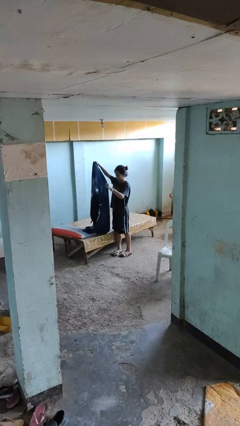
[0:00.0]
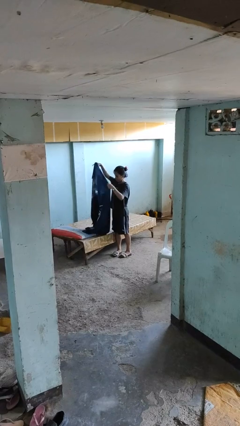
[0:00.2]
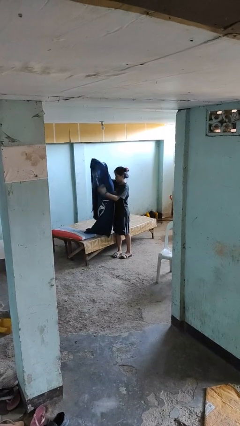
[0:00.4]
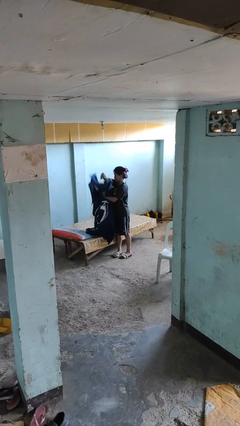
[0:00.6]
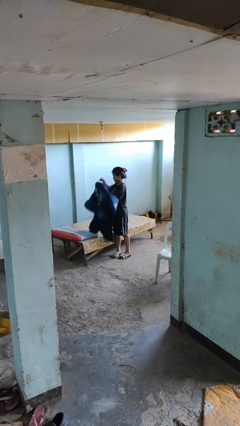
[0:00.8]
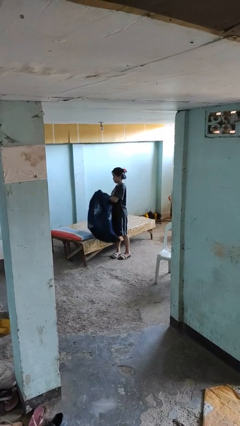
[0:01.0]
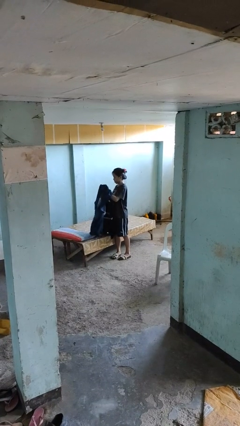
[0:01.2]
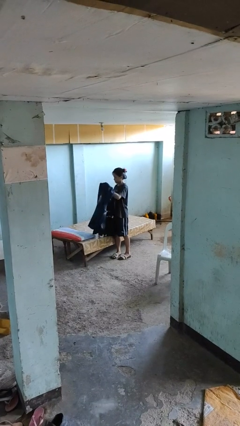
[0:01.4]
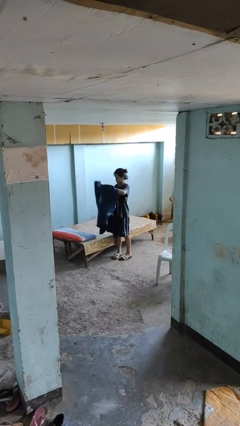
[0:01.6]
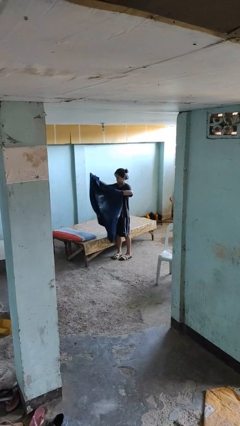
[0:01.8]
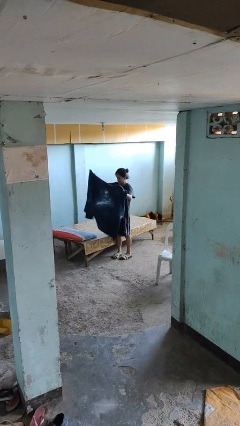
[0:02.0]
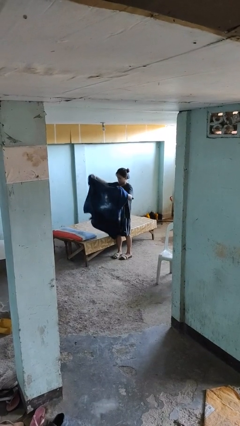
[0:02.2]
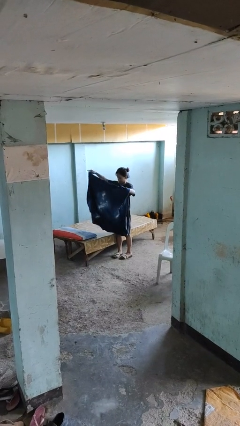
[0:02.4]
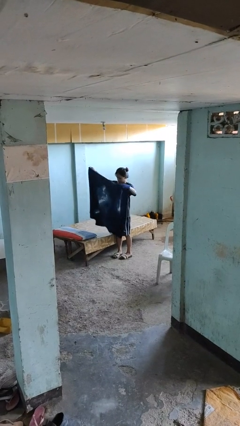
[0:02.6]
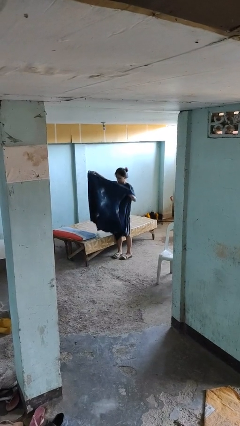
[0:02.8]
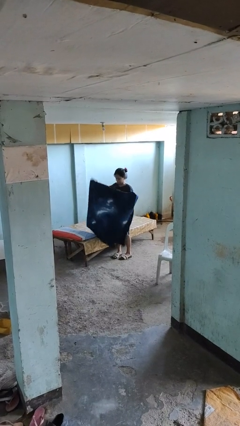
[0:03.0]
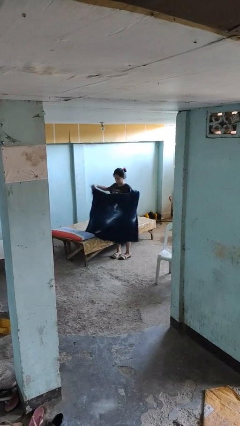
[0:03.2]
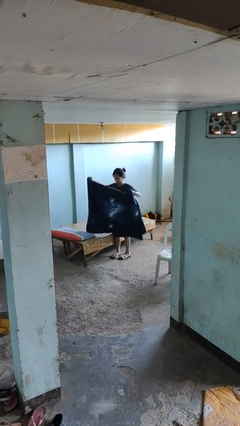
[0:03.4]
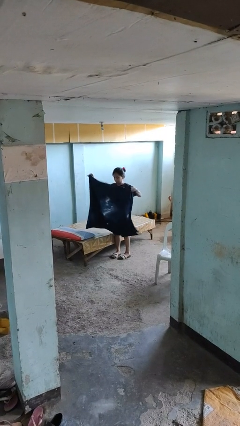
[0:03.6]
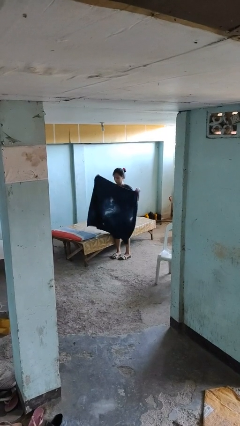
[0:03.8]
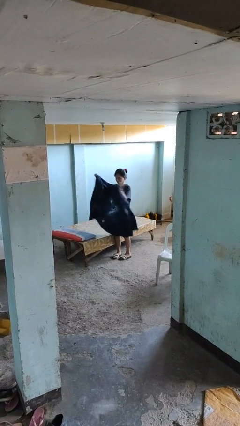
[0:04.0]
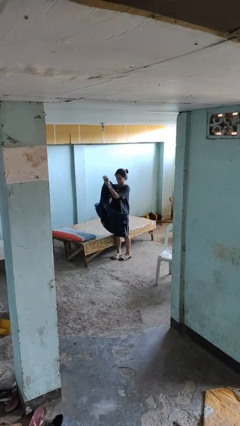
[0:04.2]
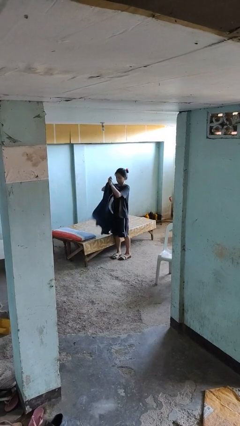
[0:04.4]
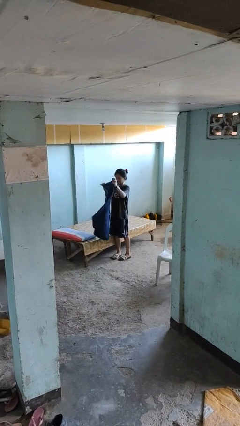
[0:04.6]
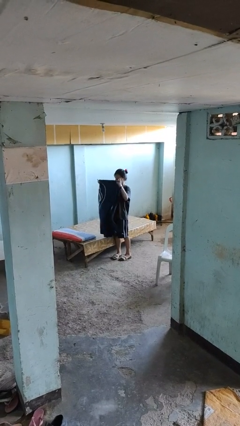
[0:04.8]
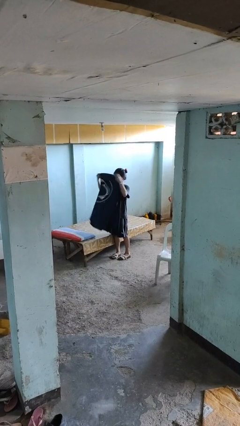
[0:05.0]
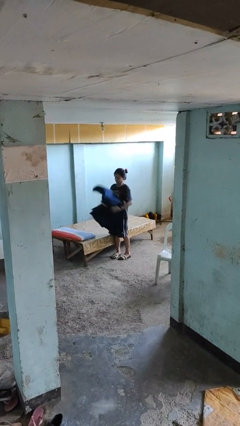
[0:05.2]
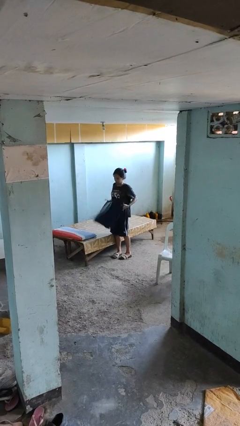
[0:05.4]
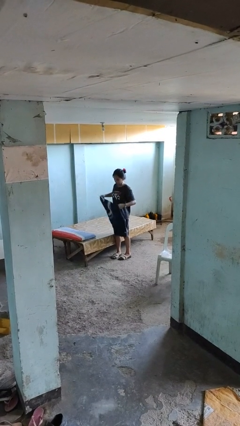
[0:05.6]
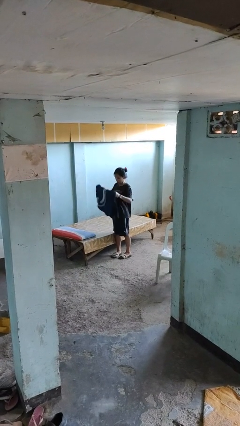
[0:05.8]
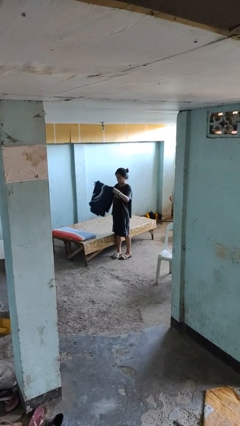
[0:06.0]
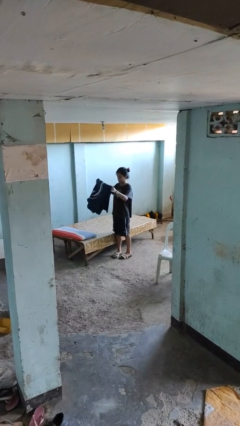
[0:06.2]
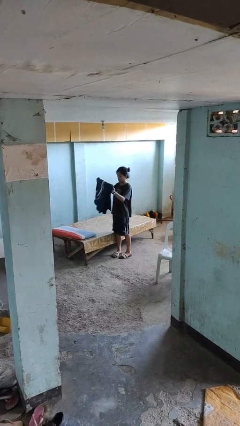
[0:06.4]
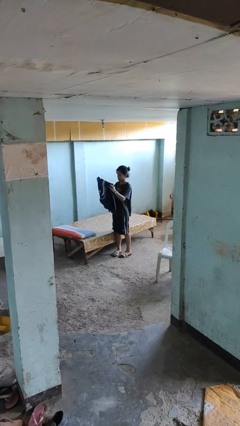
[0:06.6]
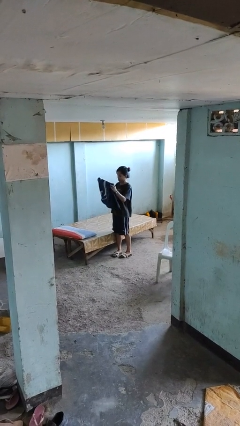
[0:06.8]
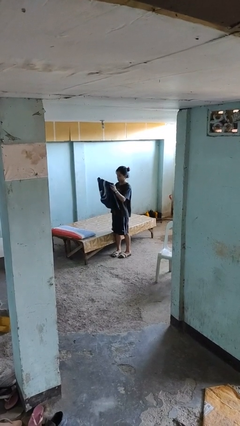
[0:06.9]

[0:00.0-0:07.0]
person folds blanket

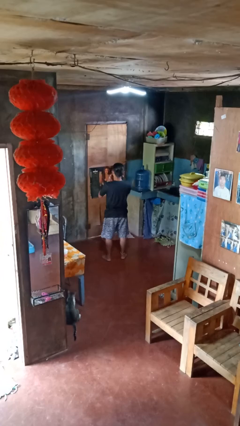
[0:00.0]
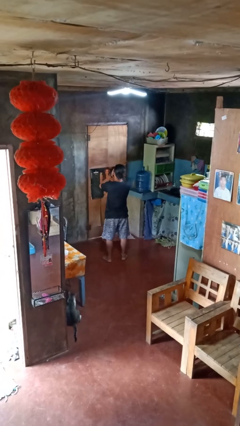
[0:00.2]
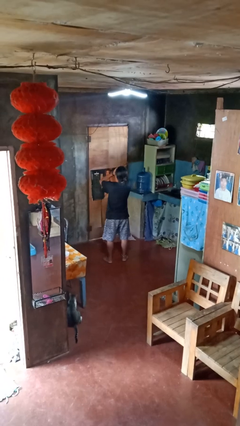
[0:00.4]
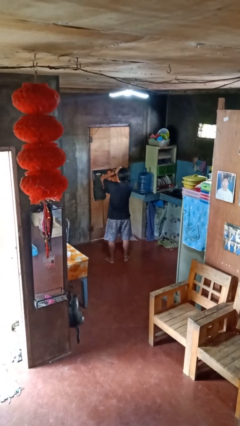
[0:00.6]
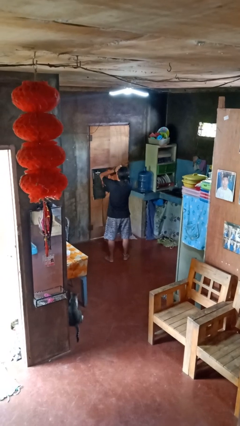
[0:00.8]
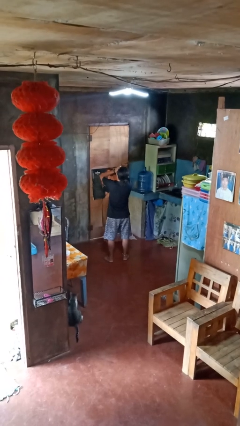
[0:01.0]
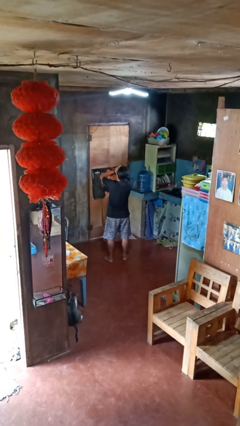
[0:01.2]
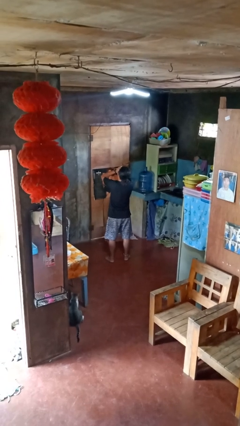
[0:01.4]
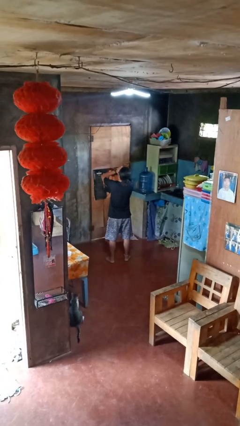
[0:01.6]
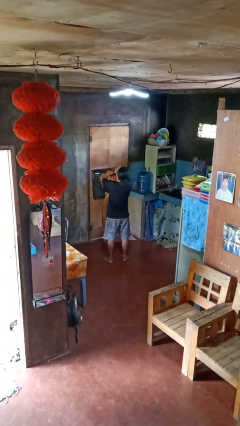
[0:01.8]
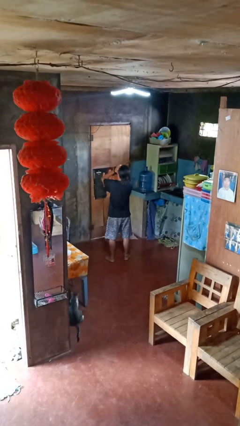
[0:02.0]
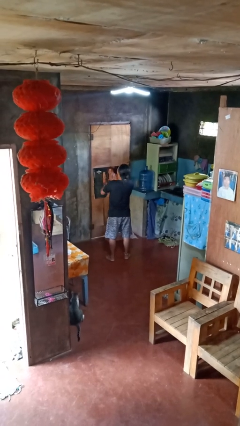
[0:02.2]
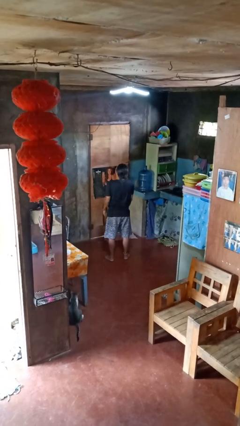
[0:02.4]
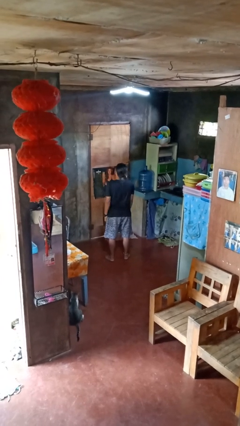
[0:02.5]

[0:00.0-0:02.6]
person yawns

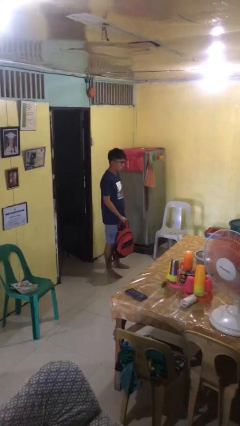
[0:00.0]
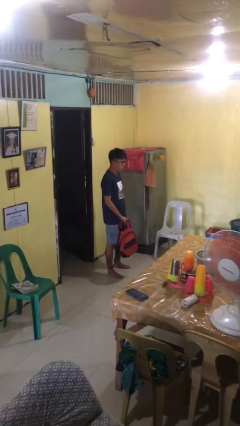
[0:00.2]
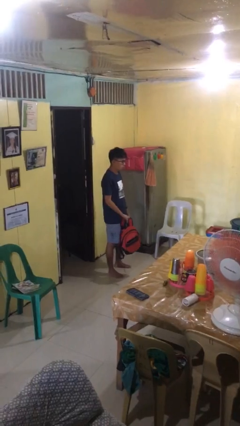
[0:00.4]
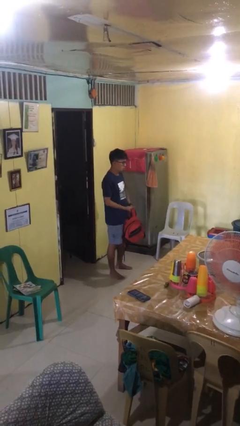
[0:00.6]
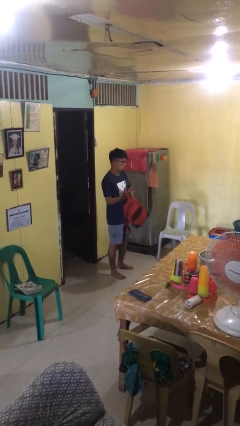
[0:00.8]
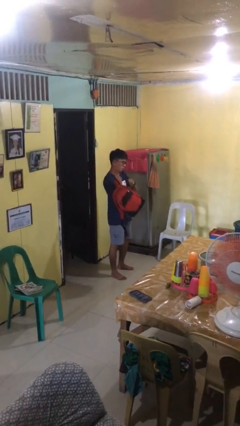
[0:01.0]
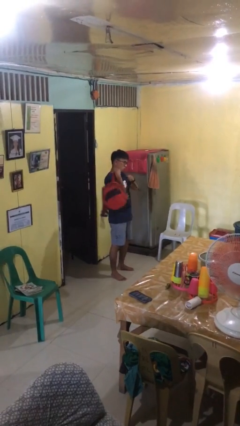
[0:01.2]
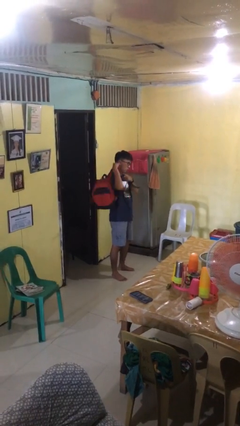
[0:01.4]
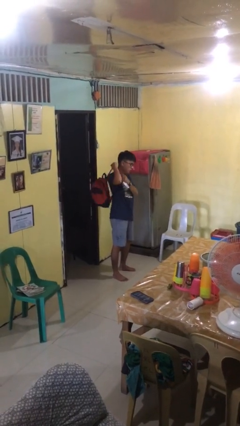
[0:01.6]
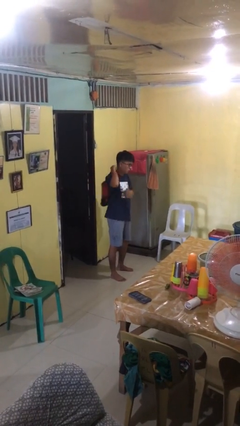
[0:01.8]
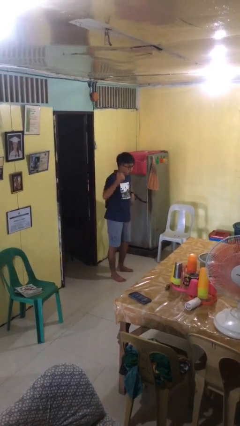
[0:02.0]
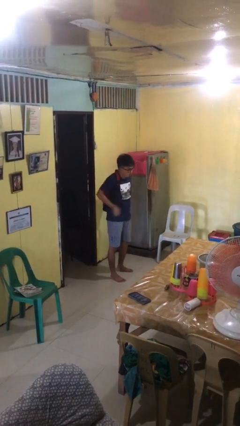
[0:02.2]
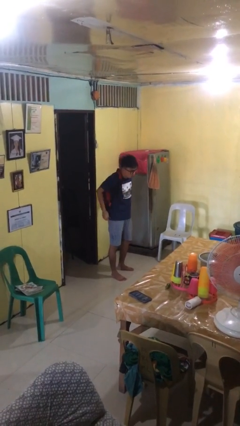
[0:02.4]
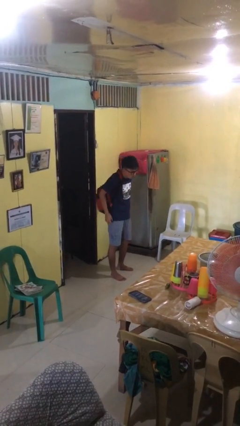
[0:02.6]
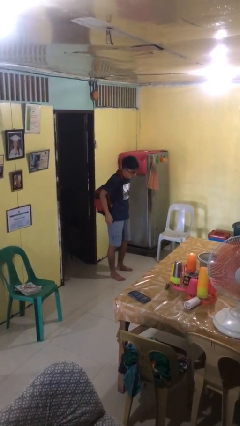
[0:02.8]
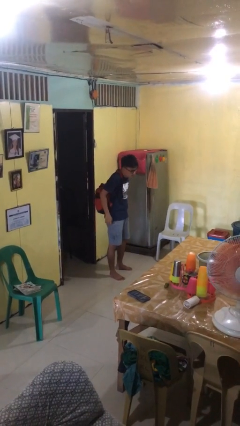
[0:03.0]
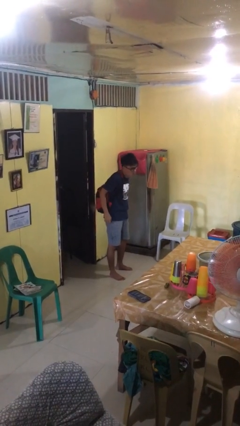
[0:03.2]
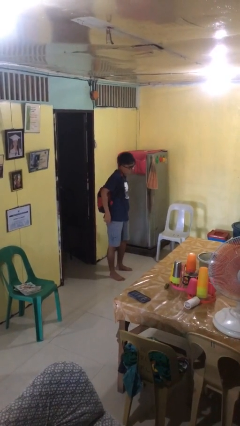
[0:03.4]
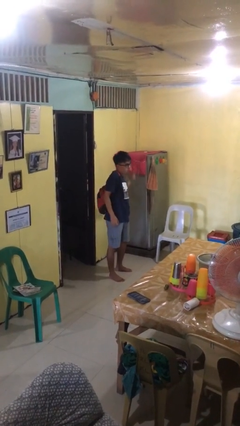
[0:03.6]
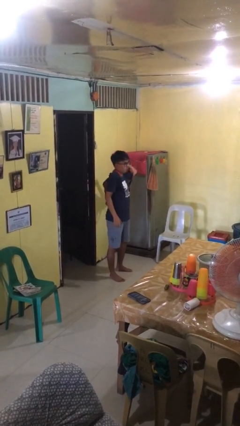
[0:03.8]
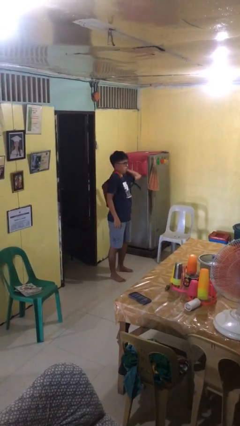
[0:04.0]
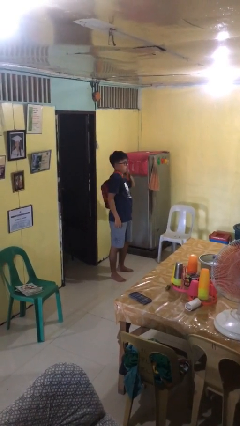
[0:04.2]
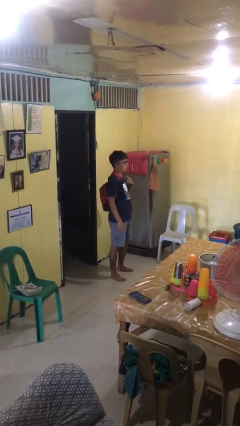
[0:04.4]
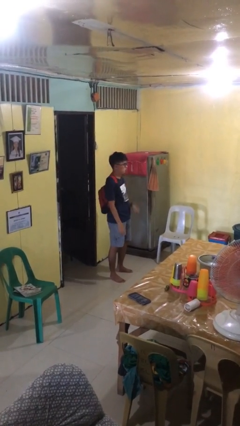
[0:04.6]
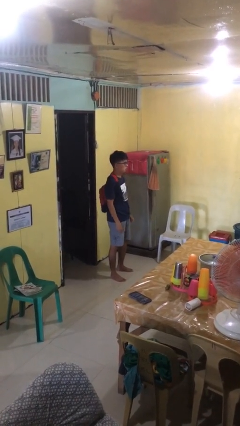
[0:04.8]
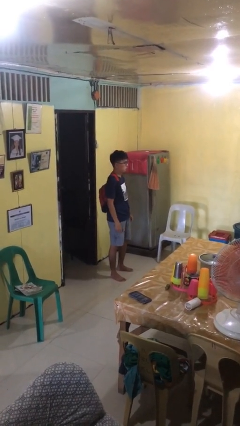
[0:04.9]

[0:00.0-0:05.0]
person puts on backpack

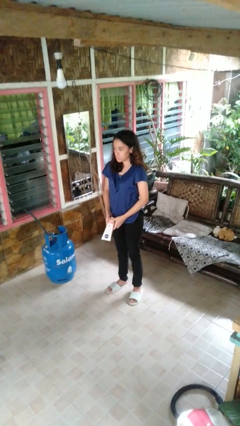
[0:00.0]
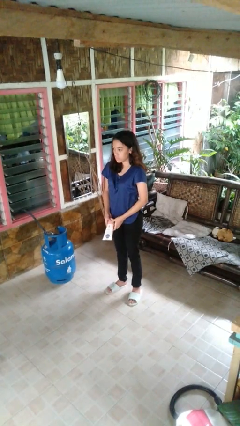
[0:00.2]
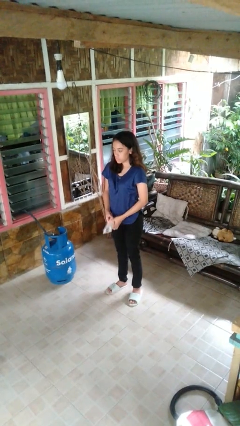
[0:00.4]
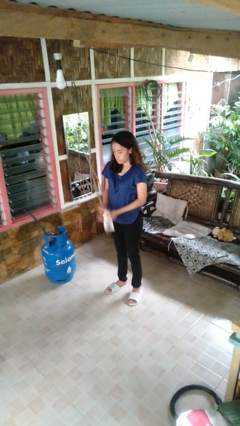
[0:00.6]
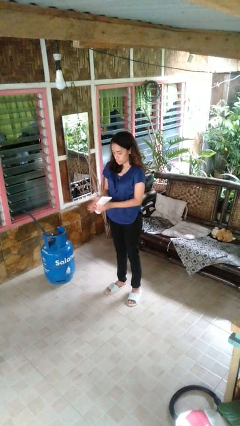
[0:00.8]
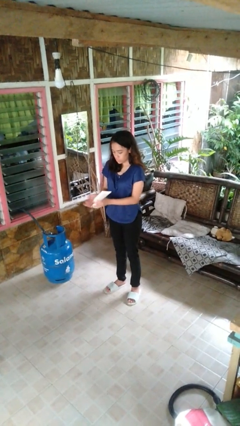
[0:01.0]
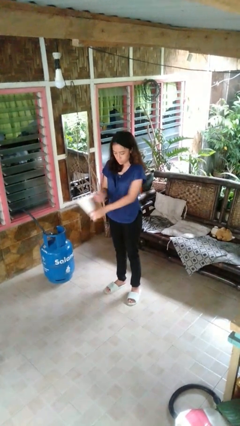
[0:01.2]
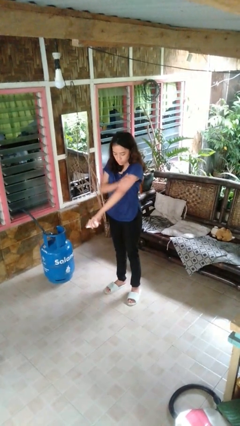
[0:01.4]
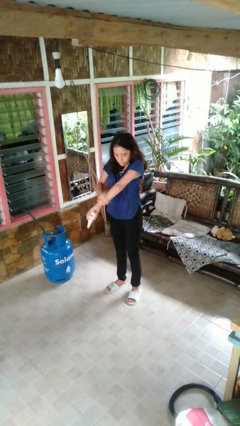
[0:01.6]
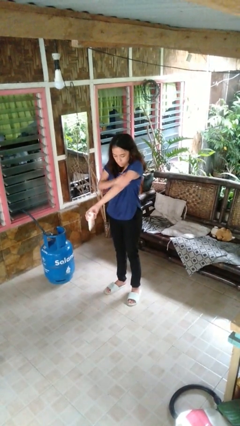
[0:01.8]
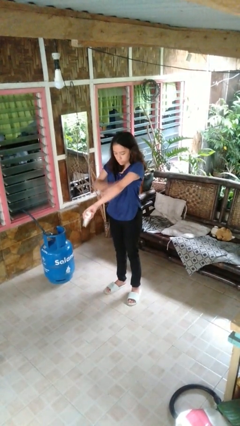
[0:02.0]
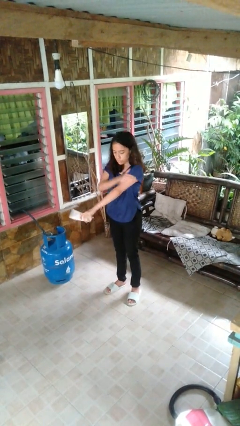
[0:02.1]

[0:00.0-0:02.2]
person applies sunscreen

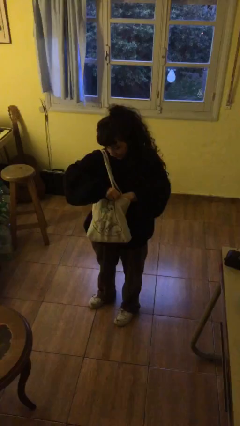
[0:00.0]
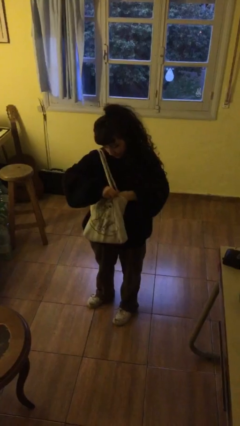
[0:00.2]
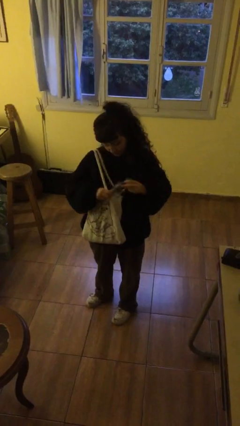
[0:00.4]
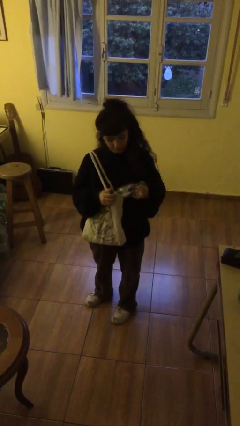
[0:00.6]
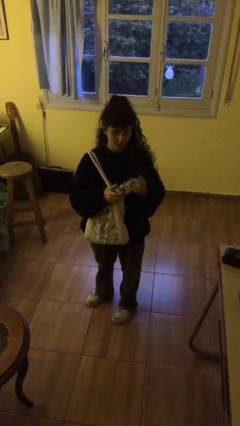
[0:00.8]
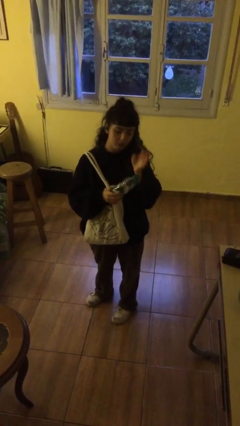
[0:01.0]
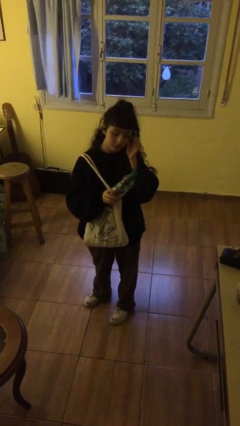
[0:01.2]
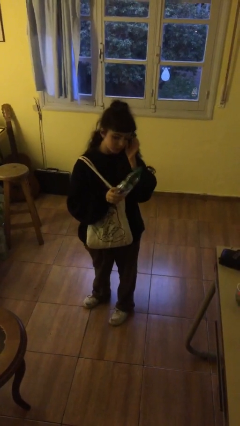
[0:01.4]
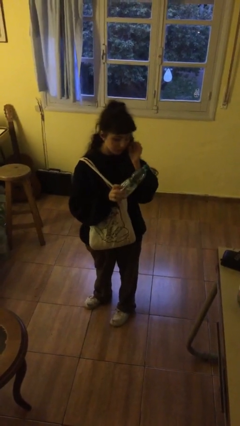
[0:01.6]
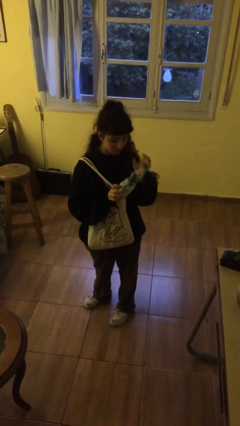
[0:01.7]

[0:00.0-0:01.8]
person takes object from purse
